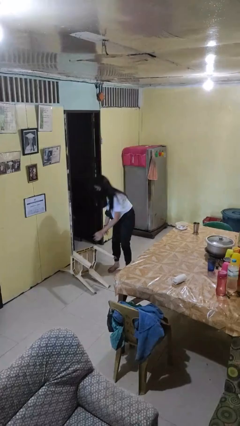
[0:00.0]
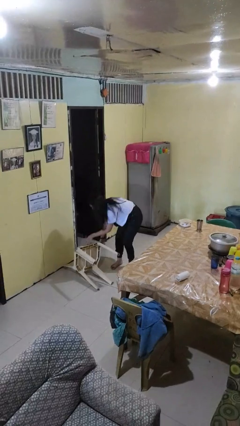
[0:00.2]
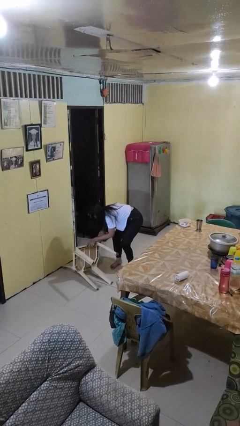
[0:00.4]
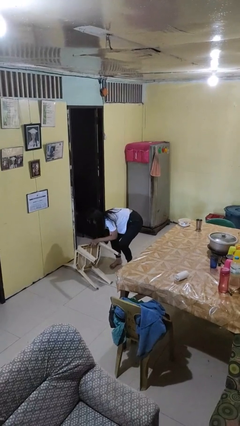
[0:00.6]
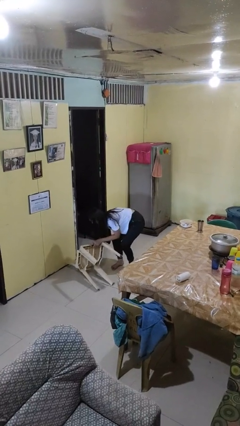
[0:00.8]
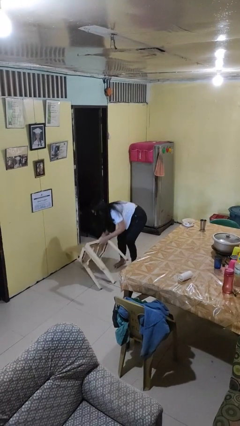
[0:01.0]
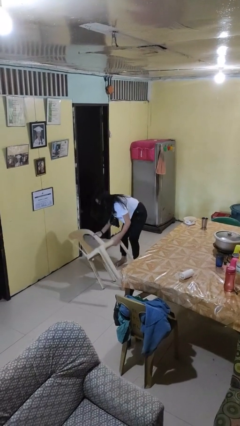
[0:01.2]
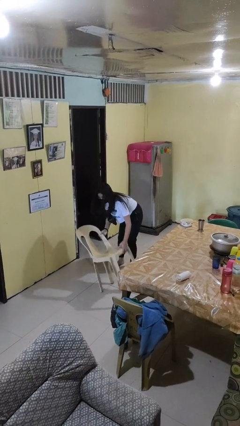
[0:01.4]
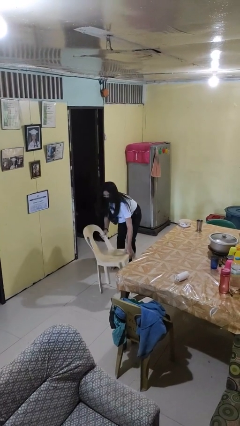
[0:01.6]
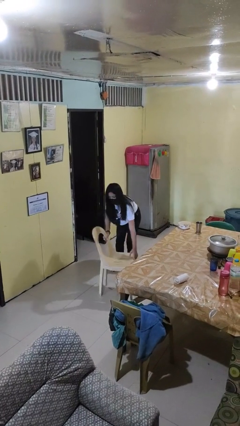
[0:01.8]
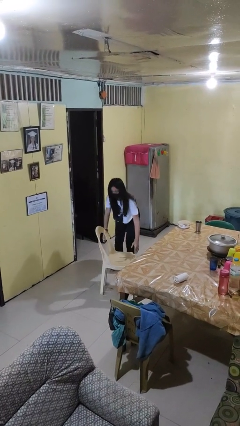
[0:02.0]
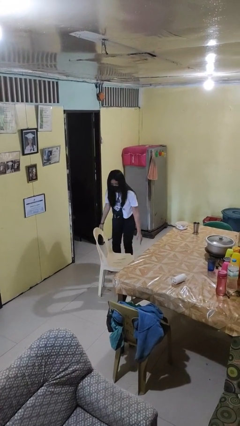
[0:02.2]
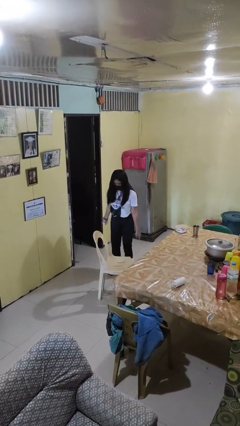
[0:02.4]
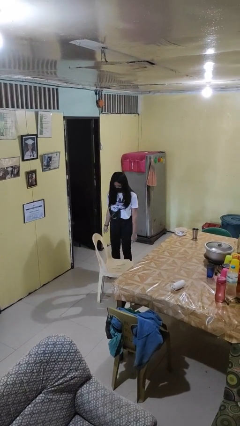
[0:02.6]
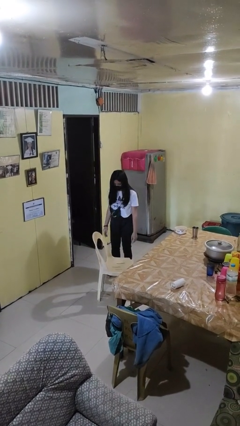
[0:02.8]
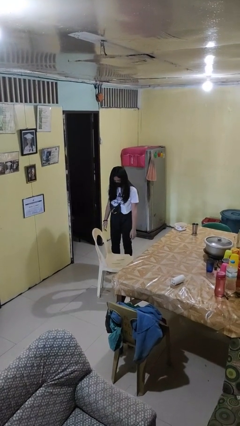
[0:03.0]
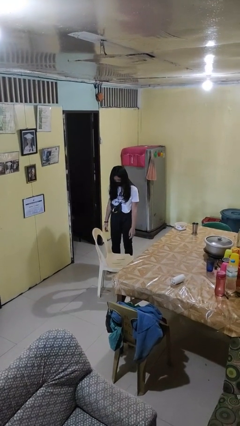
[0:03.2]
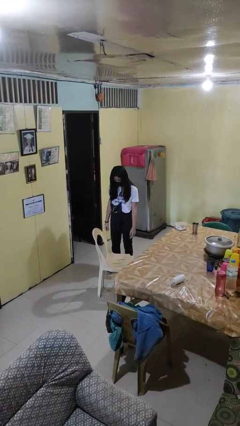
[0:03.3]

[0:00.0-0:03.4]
person sets upright furniture

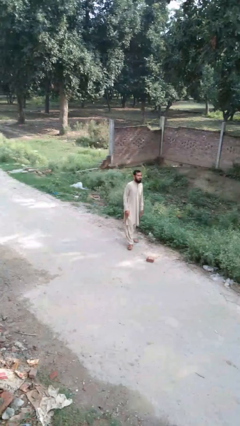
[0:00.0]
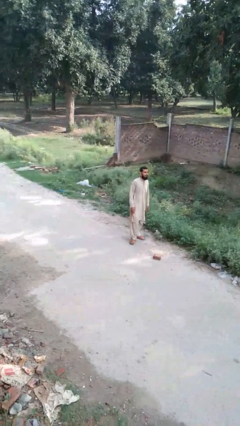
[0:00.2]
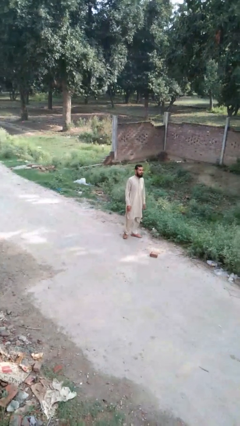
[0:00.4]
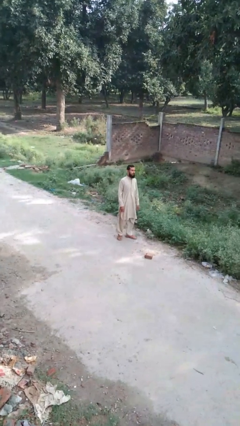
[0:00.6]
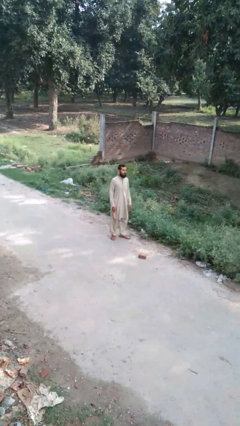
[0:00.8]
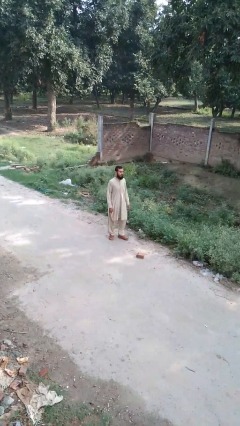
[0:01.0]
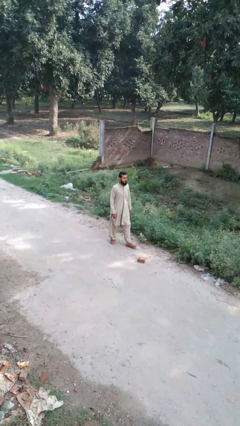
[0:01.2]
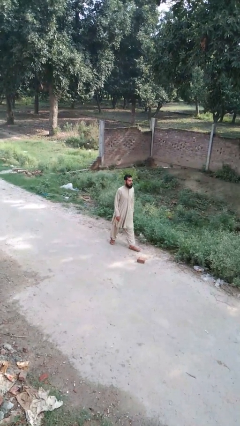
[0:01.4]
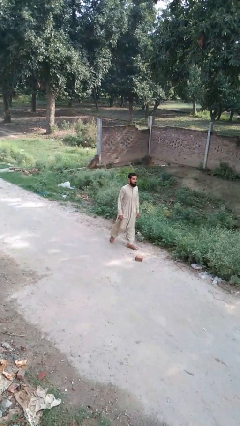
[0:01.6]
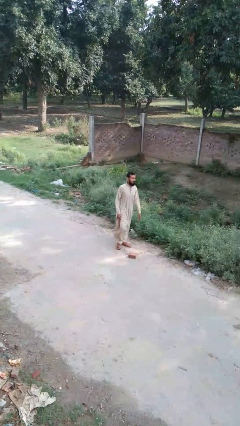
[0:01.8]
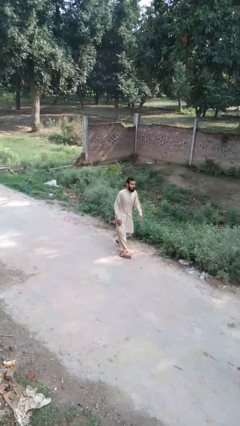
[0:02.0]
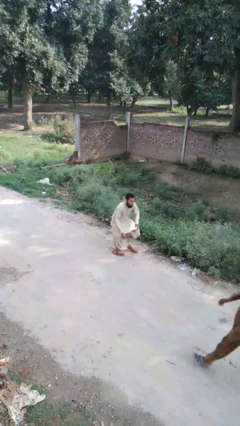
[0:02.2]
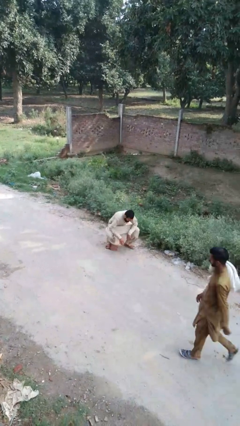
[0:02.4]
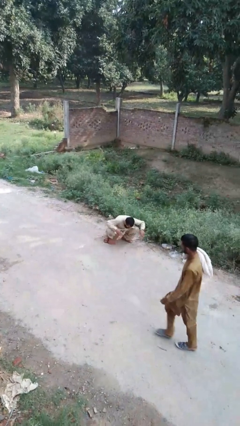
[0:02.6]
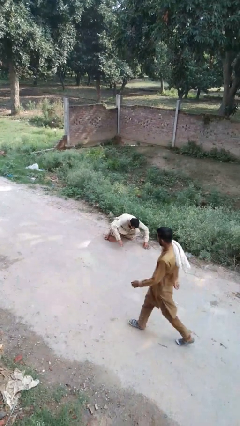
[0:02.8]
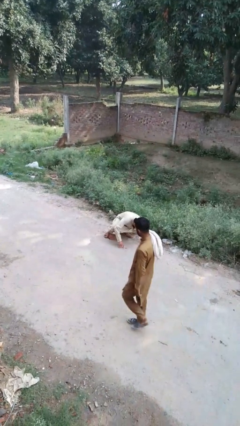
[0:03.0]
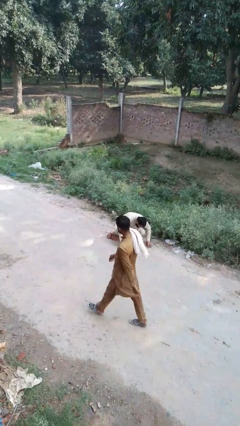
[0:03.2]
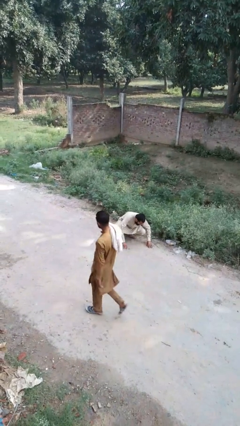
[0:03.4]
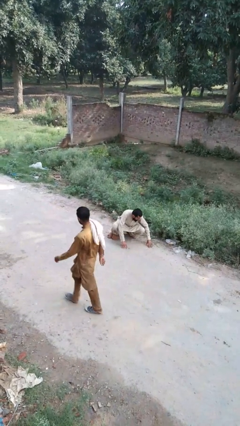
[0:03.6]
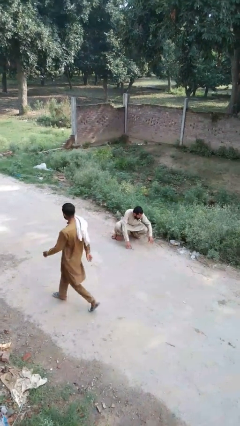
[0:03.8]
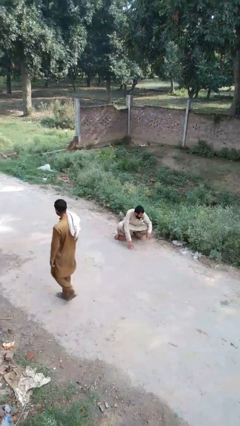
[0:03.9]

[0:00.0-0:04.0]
person trips on object on floor

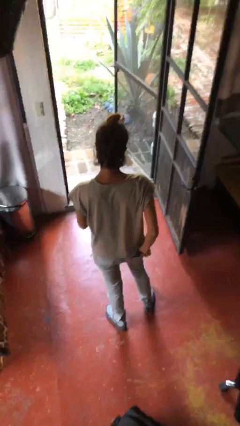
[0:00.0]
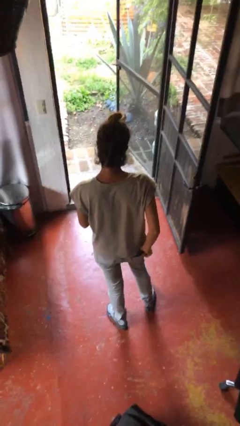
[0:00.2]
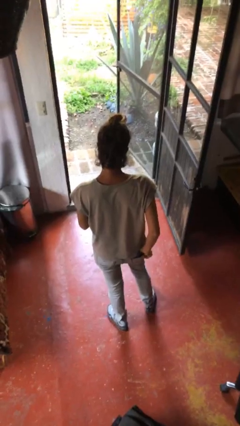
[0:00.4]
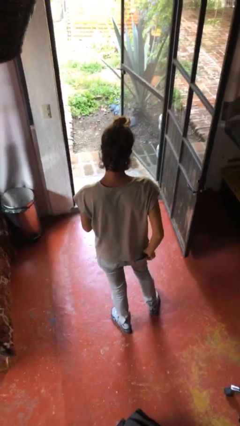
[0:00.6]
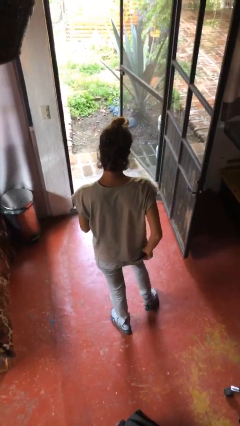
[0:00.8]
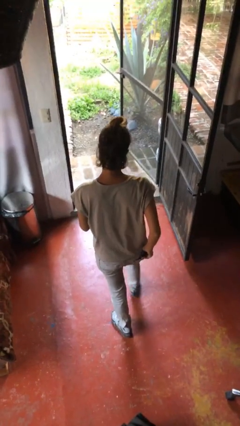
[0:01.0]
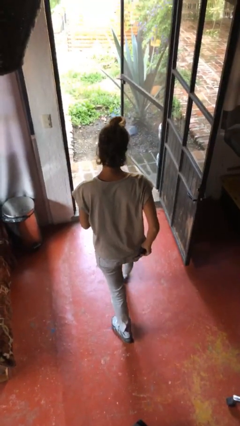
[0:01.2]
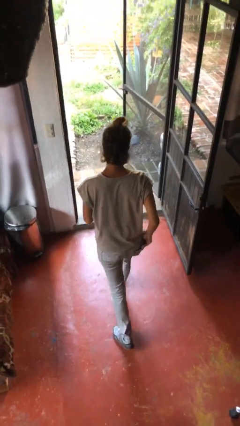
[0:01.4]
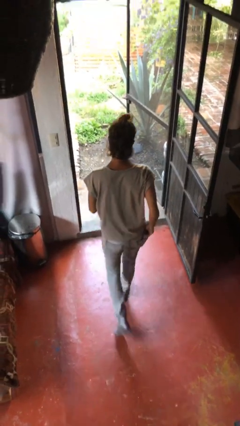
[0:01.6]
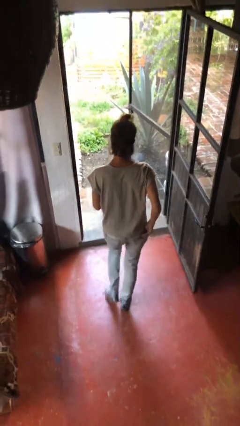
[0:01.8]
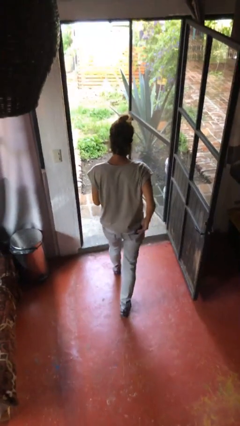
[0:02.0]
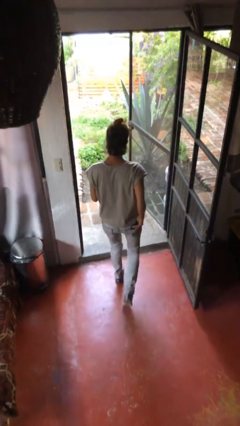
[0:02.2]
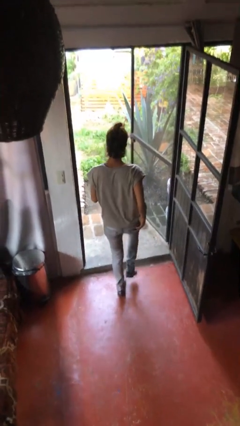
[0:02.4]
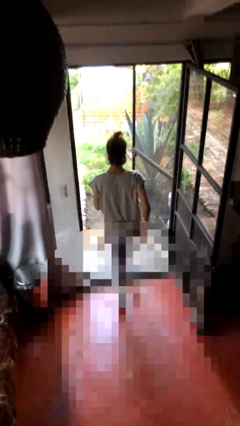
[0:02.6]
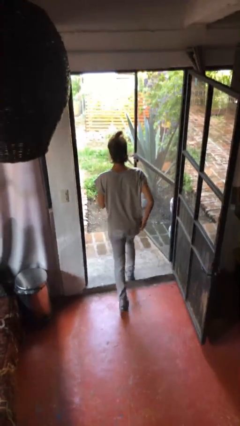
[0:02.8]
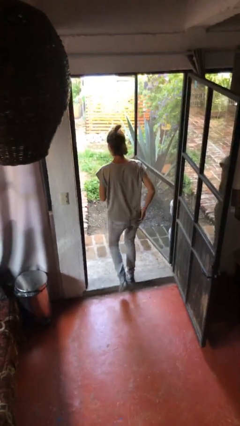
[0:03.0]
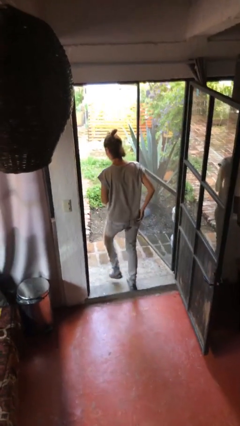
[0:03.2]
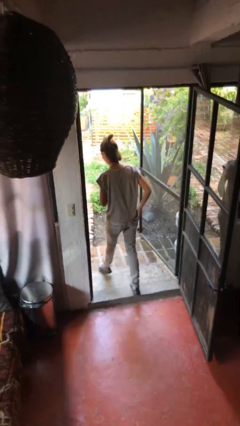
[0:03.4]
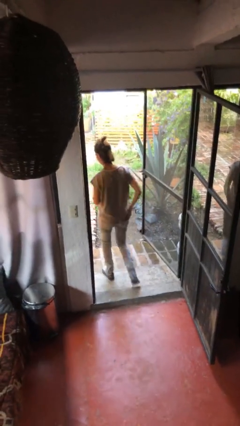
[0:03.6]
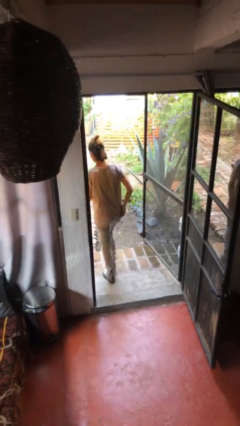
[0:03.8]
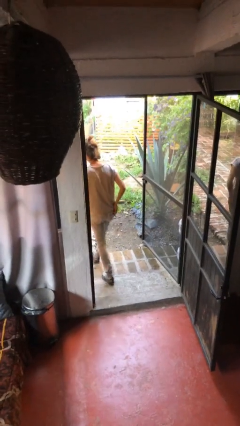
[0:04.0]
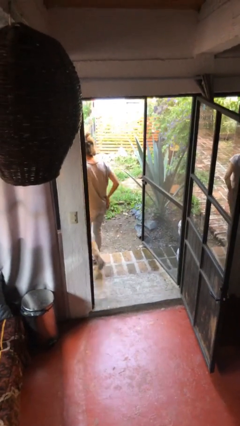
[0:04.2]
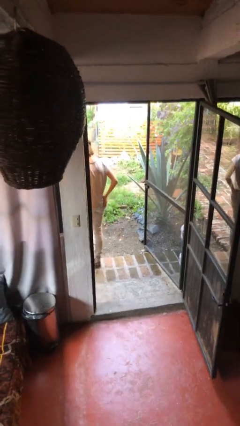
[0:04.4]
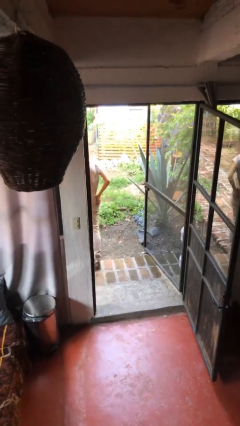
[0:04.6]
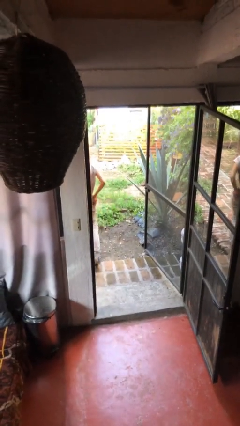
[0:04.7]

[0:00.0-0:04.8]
person exits scene through structure

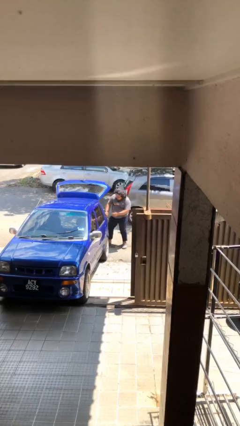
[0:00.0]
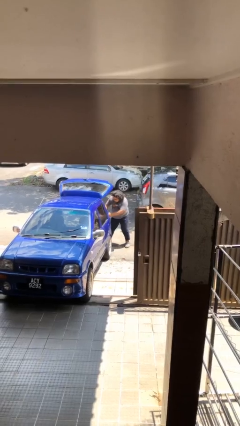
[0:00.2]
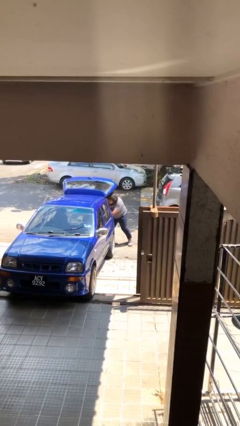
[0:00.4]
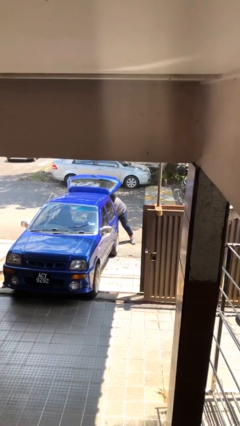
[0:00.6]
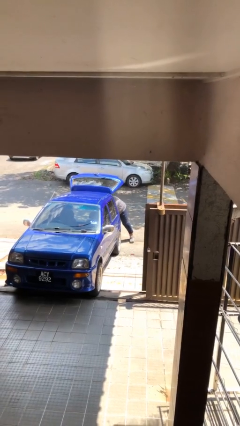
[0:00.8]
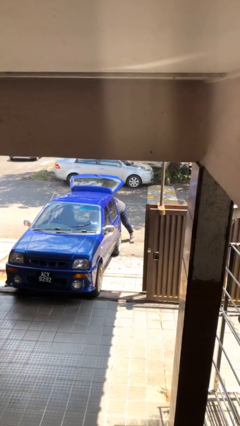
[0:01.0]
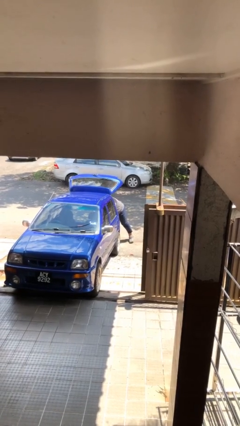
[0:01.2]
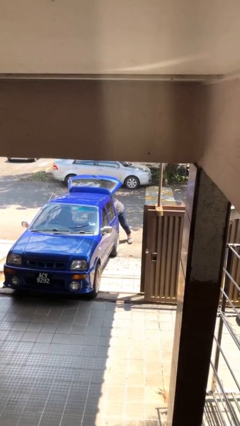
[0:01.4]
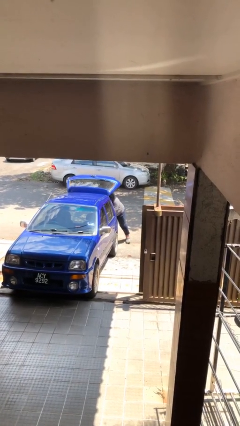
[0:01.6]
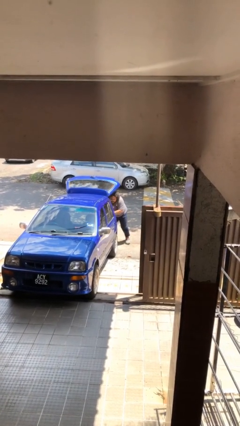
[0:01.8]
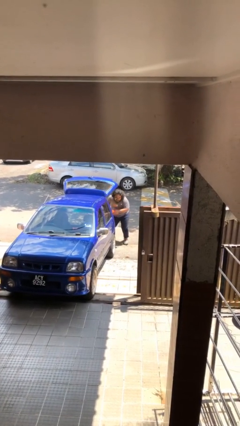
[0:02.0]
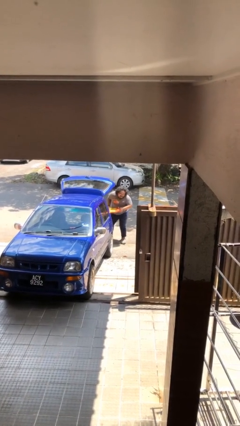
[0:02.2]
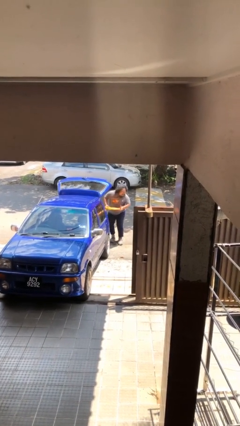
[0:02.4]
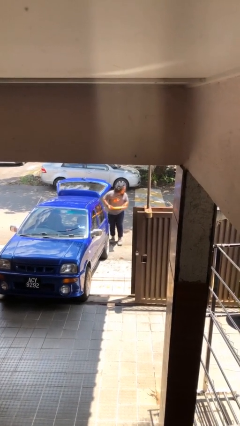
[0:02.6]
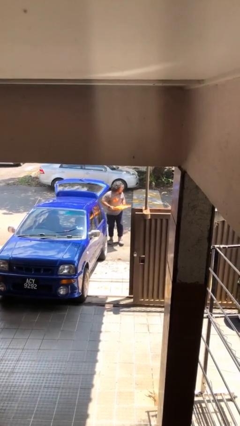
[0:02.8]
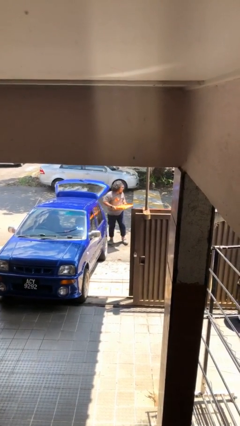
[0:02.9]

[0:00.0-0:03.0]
person unloads car

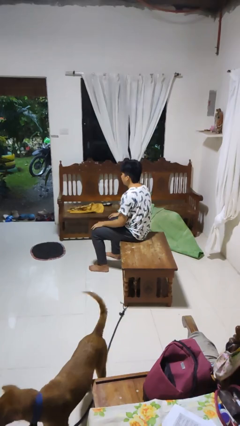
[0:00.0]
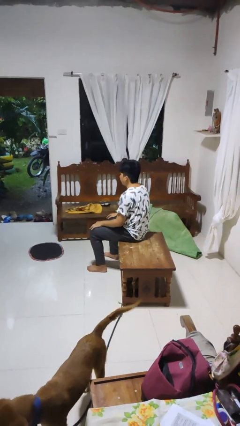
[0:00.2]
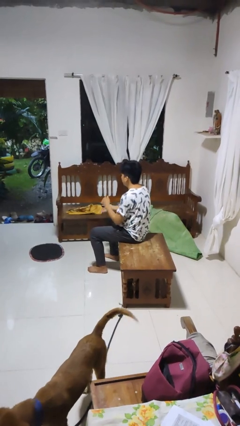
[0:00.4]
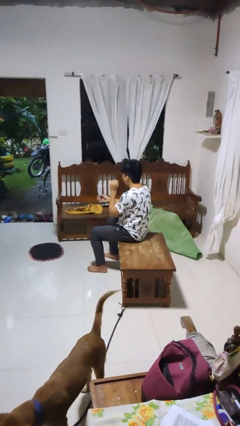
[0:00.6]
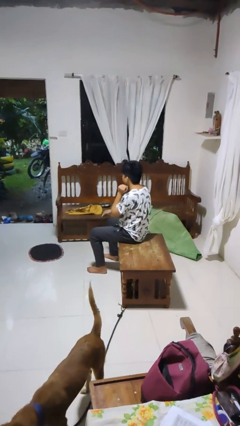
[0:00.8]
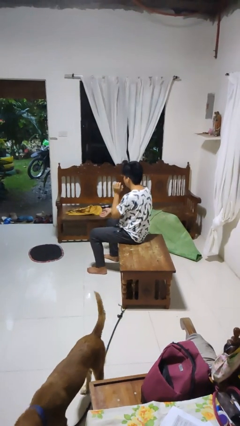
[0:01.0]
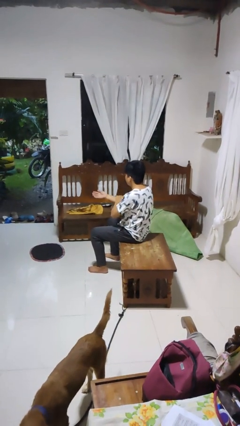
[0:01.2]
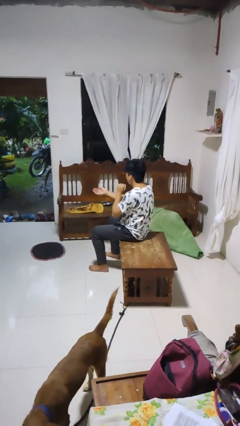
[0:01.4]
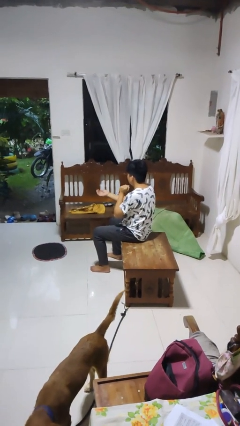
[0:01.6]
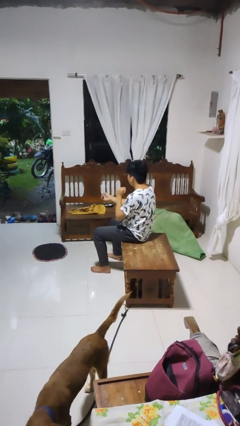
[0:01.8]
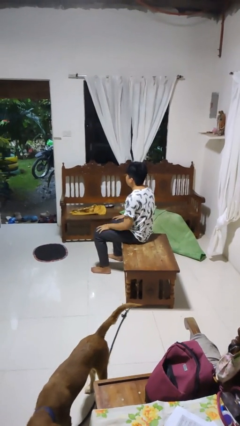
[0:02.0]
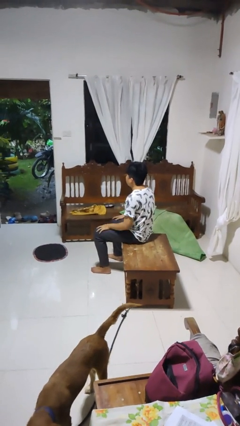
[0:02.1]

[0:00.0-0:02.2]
person swats bug

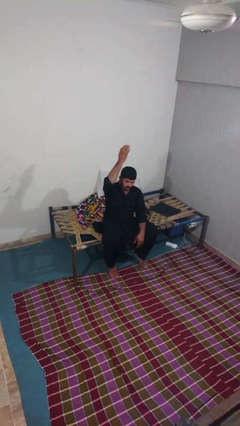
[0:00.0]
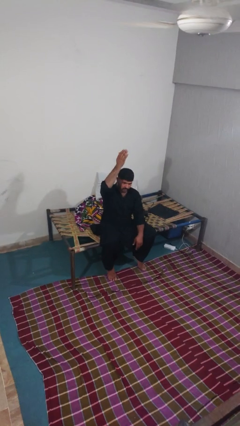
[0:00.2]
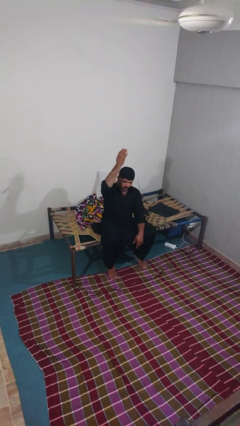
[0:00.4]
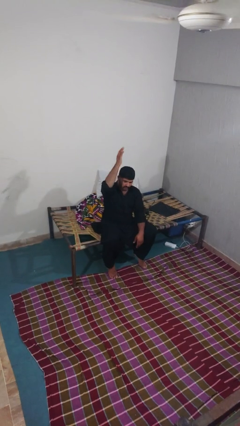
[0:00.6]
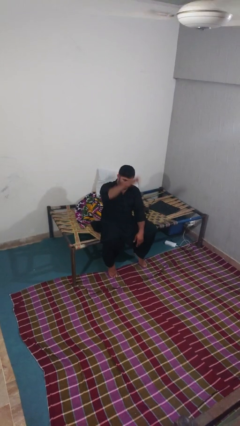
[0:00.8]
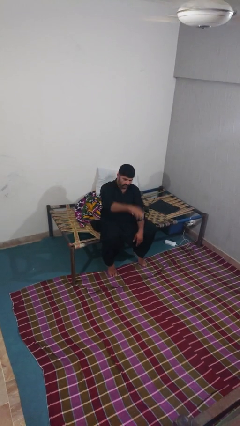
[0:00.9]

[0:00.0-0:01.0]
person gestures swipe down
